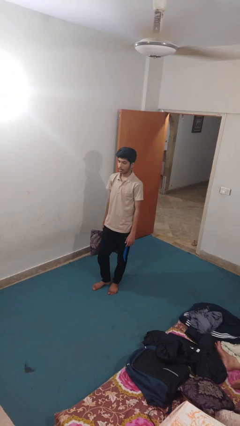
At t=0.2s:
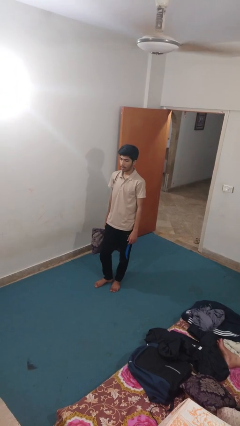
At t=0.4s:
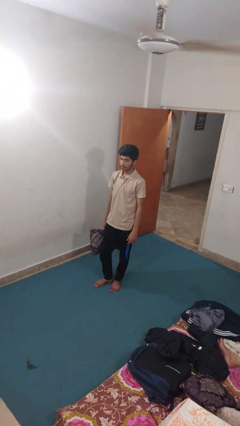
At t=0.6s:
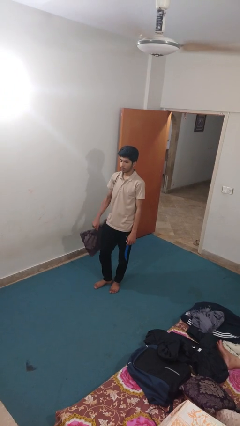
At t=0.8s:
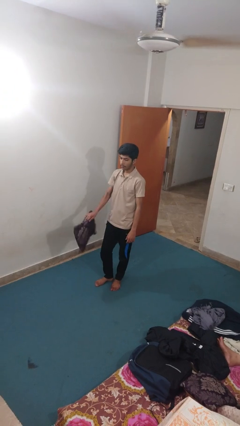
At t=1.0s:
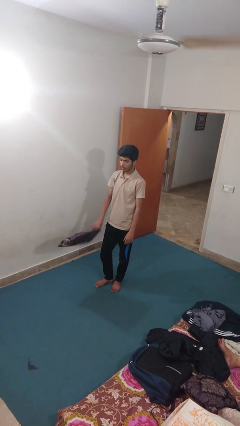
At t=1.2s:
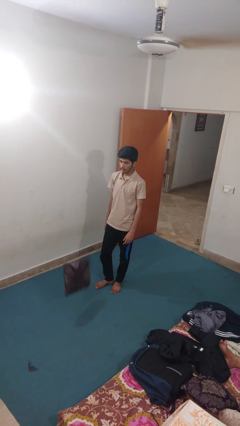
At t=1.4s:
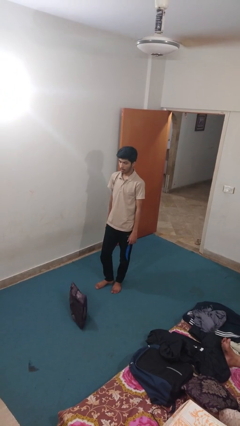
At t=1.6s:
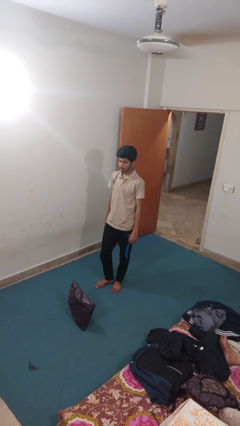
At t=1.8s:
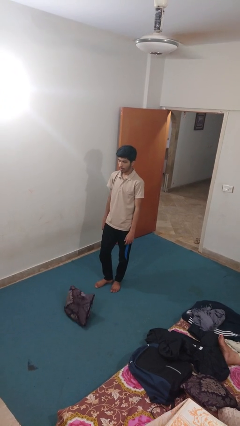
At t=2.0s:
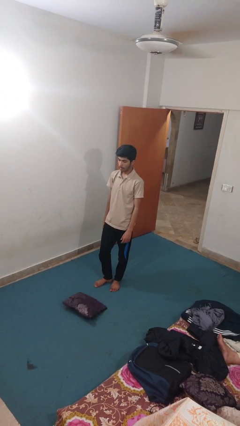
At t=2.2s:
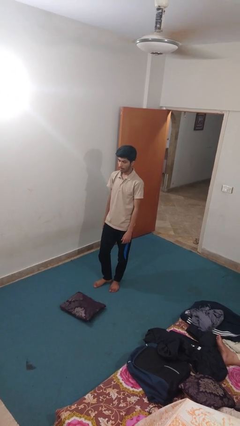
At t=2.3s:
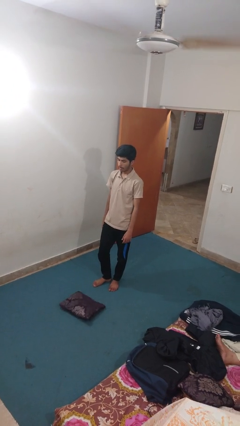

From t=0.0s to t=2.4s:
person drops object

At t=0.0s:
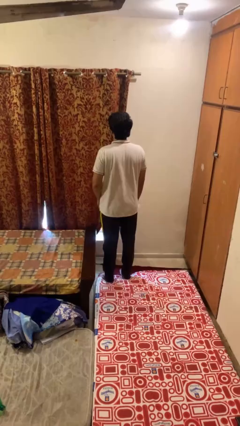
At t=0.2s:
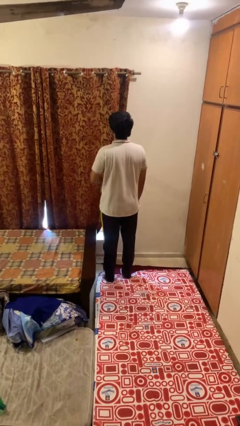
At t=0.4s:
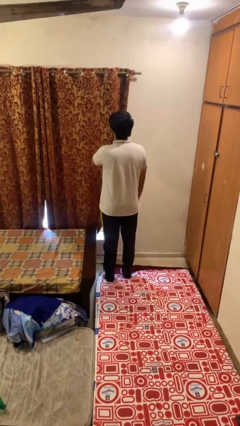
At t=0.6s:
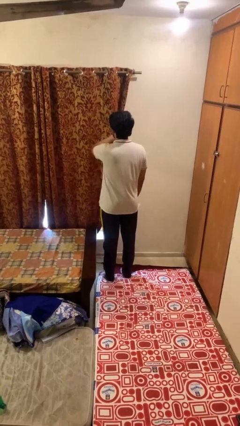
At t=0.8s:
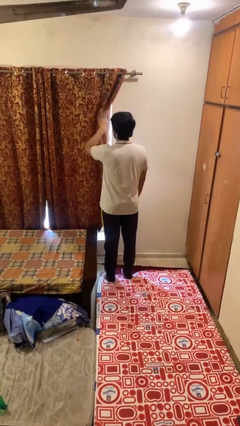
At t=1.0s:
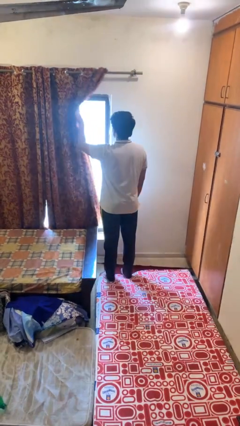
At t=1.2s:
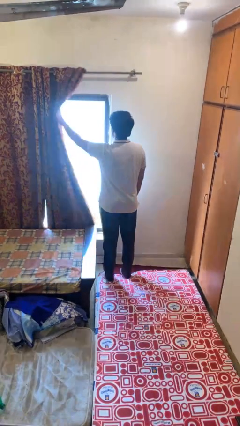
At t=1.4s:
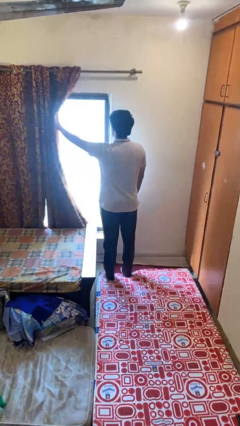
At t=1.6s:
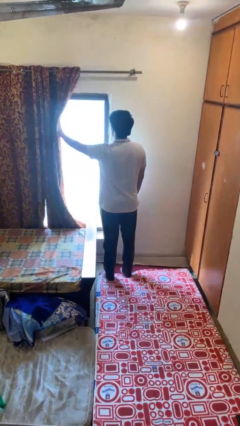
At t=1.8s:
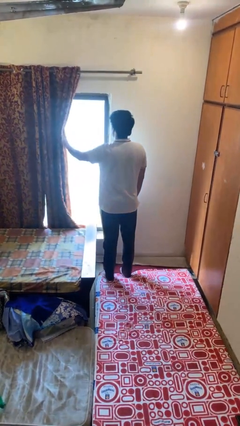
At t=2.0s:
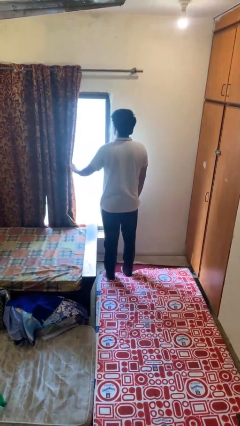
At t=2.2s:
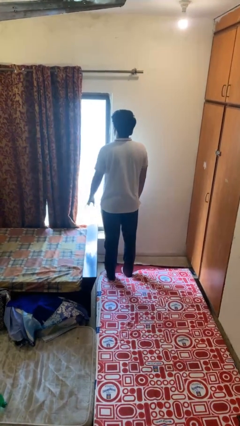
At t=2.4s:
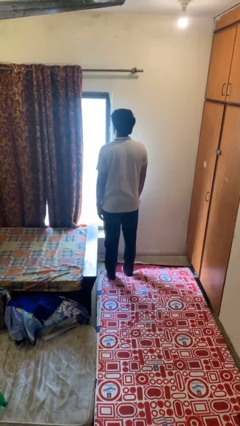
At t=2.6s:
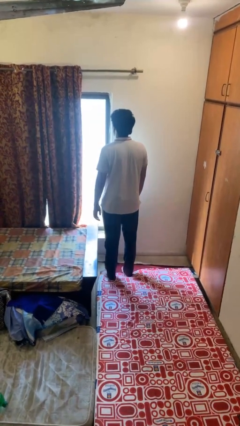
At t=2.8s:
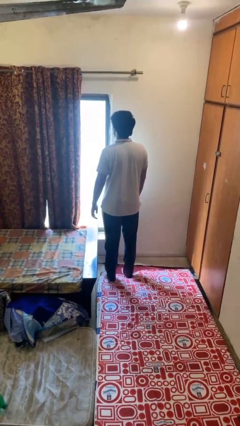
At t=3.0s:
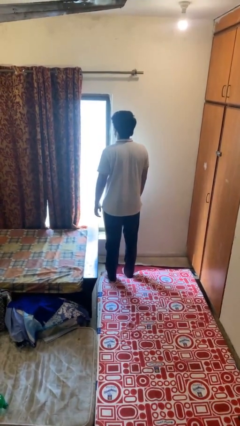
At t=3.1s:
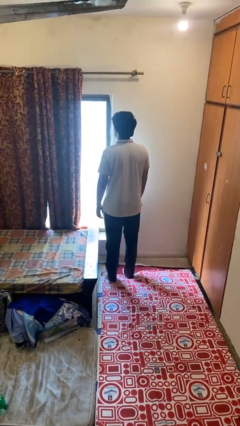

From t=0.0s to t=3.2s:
person opens curtains

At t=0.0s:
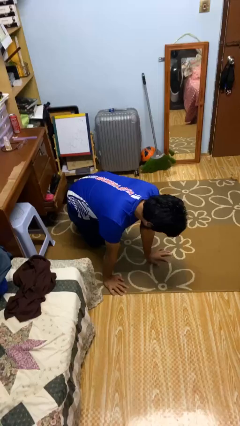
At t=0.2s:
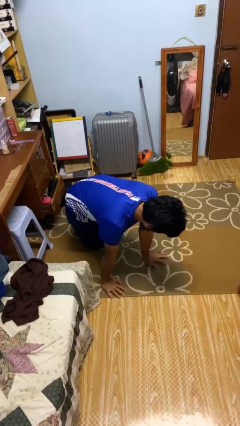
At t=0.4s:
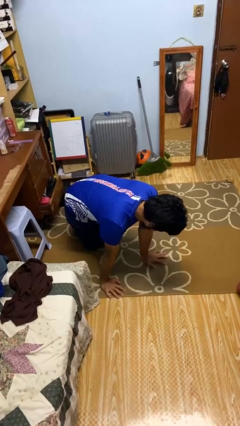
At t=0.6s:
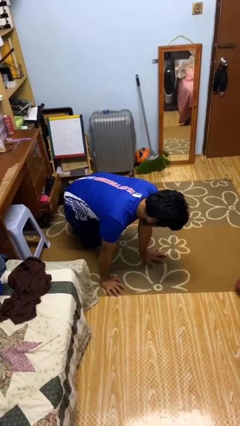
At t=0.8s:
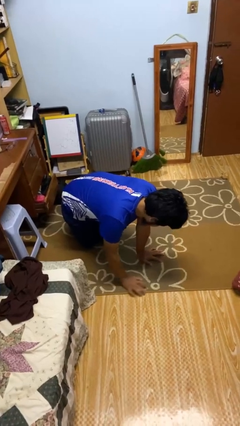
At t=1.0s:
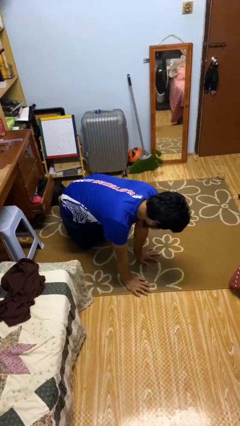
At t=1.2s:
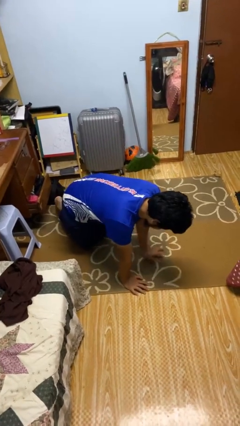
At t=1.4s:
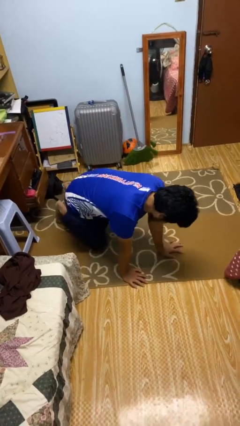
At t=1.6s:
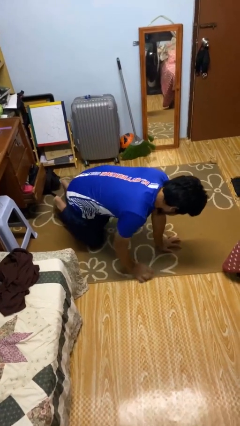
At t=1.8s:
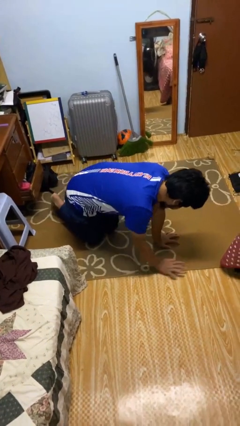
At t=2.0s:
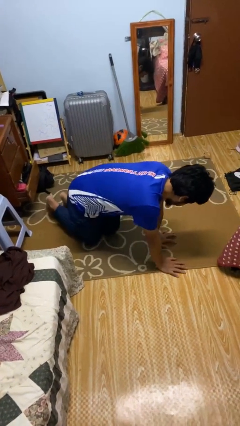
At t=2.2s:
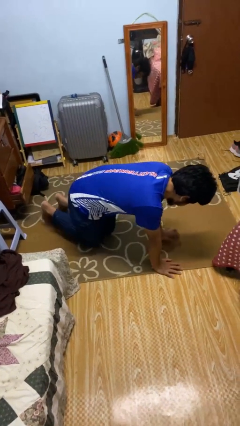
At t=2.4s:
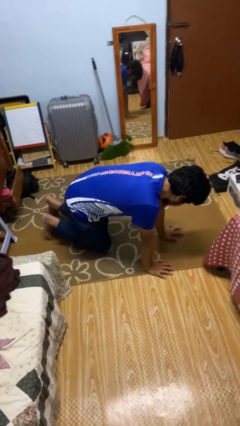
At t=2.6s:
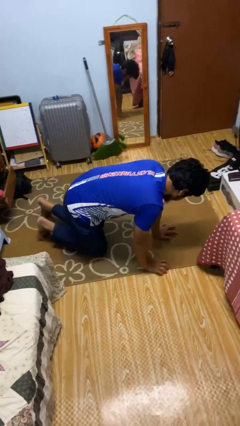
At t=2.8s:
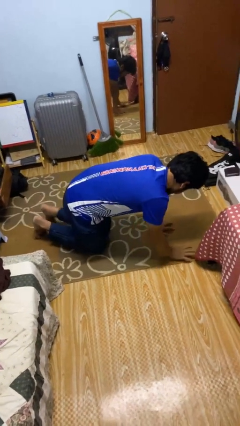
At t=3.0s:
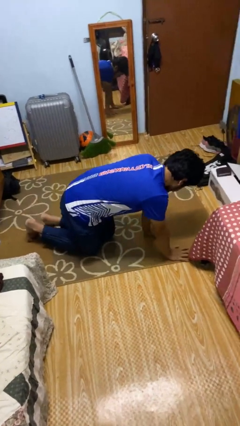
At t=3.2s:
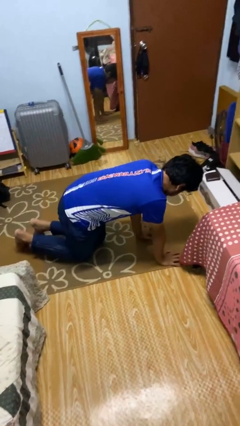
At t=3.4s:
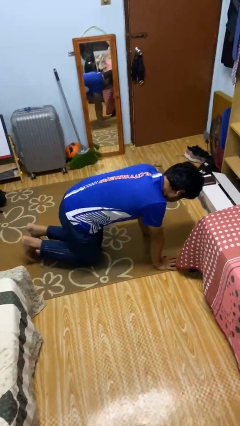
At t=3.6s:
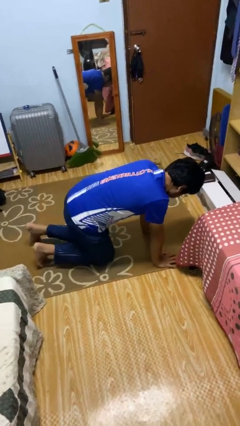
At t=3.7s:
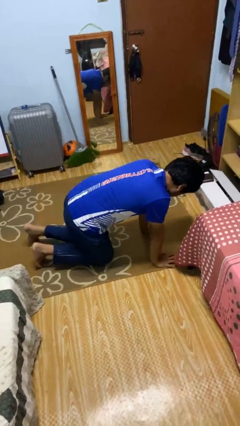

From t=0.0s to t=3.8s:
person crawls

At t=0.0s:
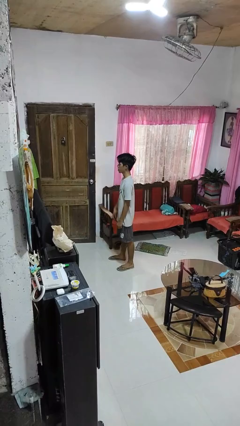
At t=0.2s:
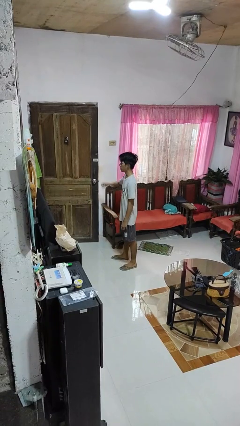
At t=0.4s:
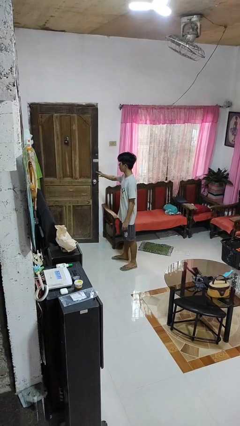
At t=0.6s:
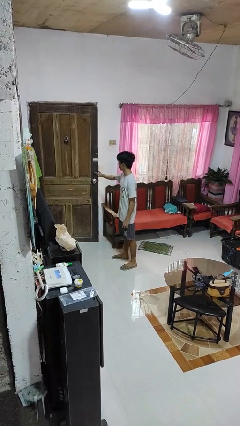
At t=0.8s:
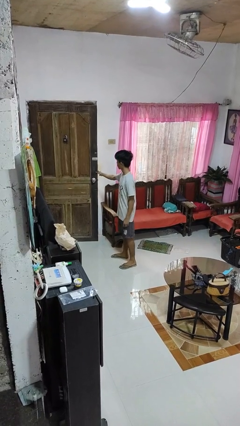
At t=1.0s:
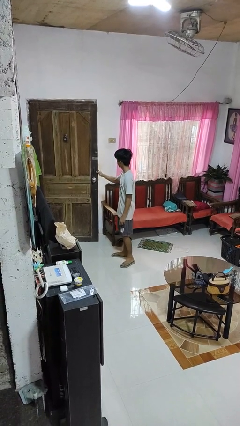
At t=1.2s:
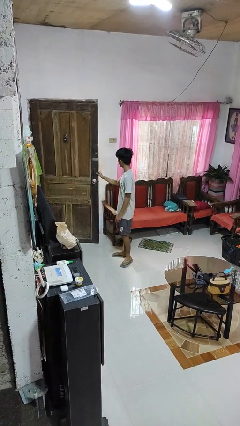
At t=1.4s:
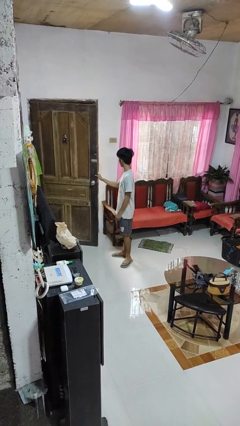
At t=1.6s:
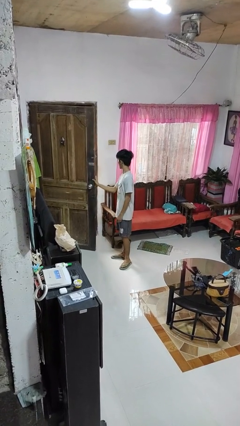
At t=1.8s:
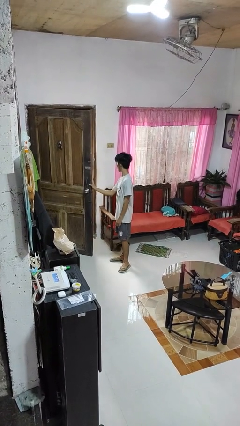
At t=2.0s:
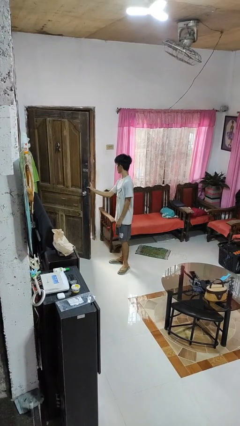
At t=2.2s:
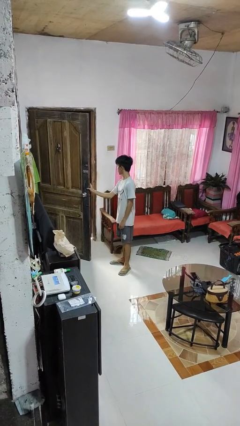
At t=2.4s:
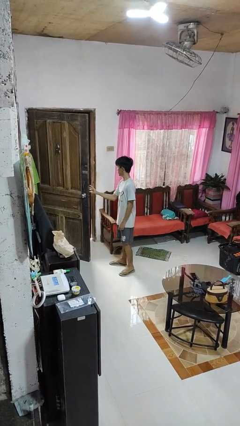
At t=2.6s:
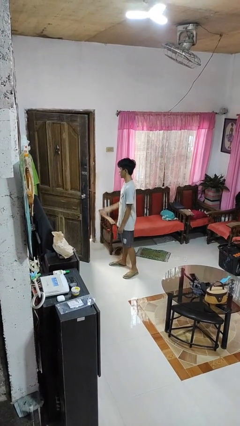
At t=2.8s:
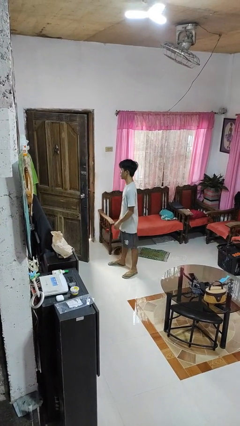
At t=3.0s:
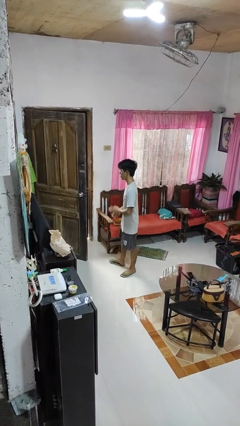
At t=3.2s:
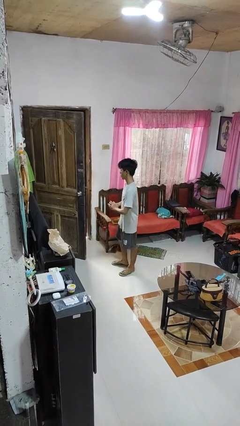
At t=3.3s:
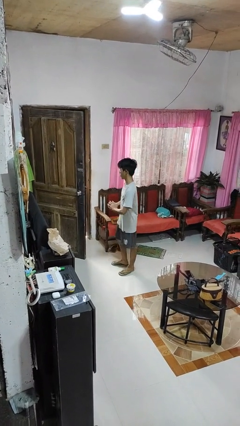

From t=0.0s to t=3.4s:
person opens facility door

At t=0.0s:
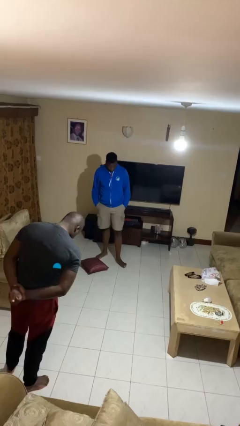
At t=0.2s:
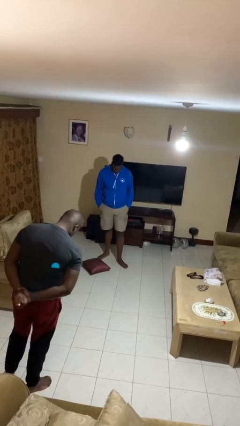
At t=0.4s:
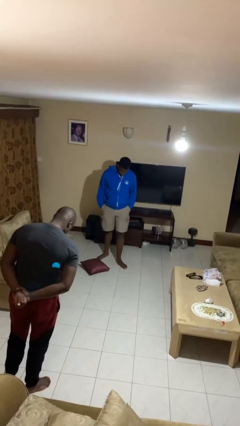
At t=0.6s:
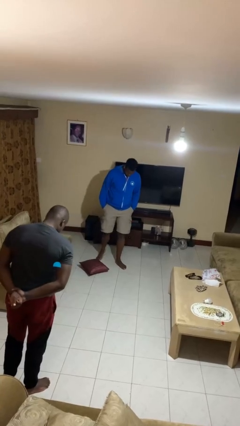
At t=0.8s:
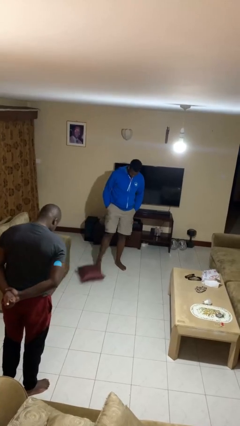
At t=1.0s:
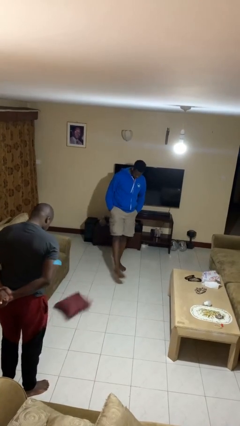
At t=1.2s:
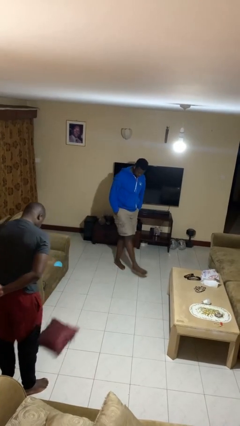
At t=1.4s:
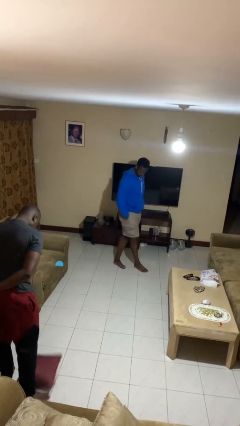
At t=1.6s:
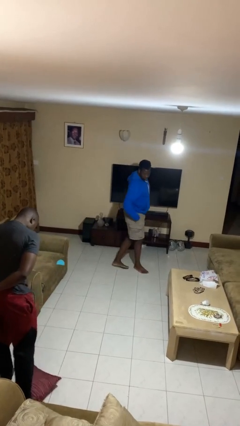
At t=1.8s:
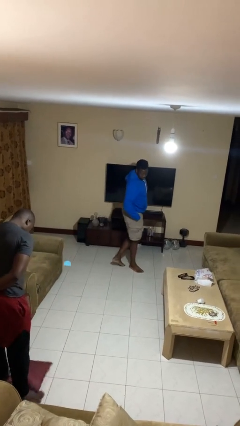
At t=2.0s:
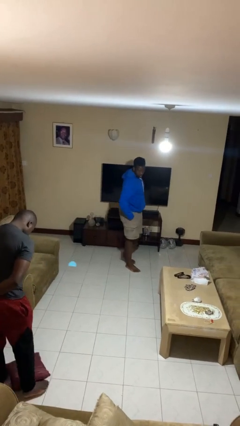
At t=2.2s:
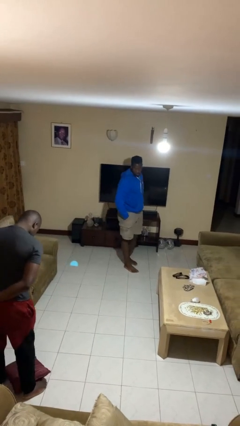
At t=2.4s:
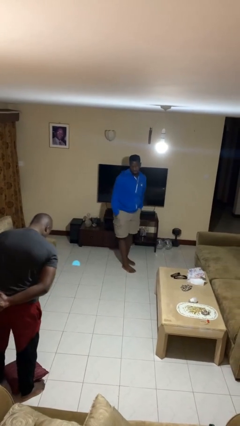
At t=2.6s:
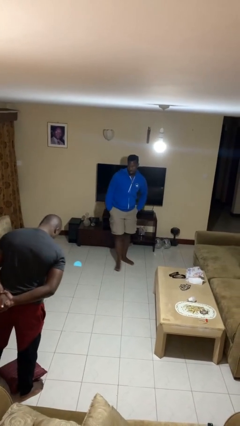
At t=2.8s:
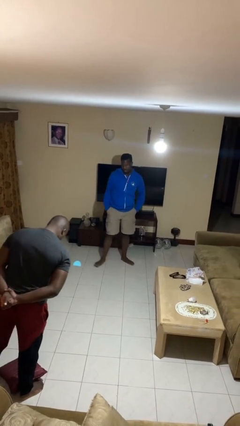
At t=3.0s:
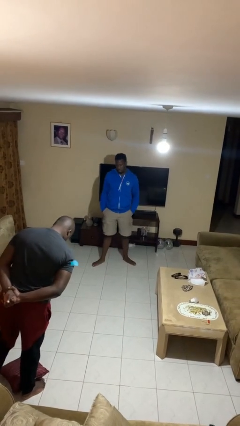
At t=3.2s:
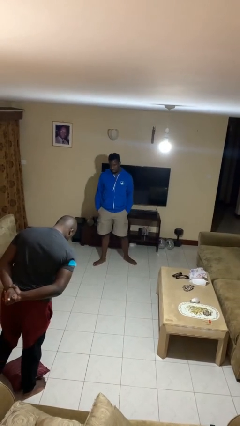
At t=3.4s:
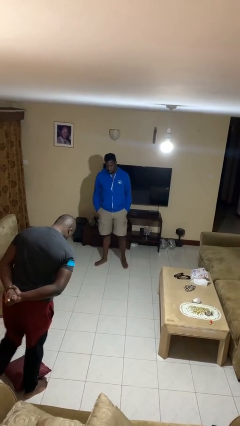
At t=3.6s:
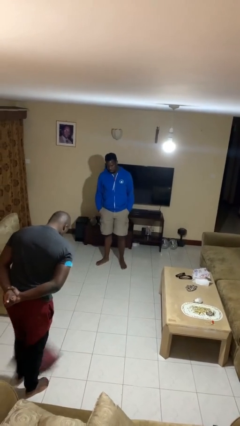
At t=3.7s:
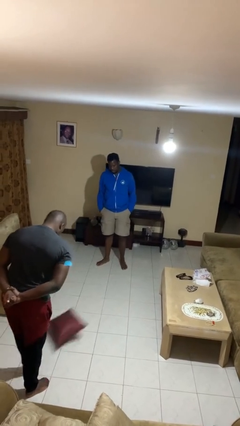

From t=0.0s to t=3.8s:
person kicks object to person

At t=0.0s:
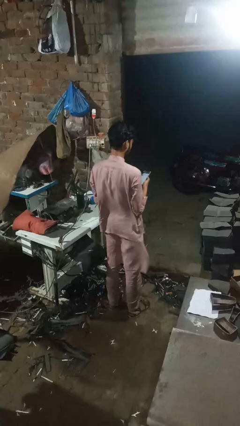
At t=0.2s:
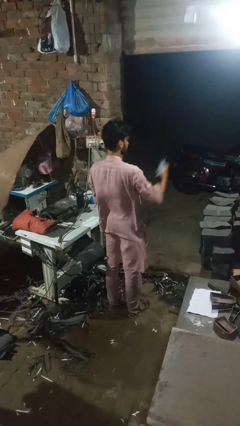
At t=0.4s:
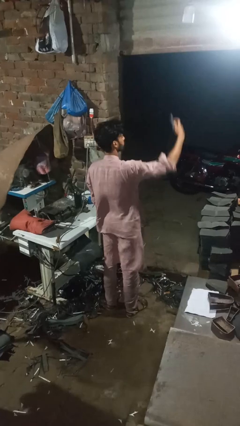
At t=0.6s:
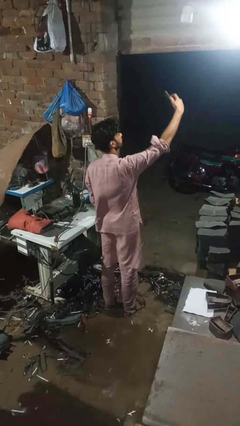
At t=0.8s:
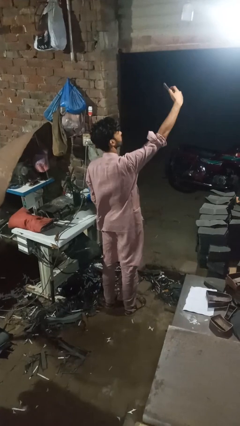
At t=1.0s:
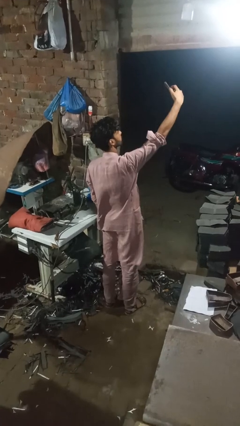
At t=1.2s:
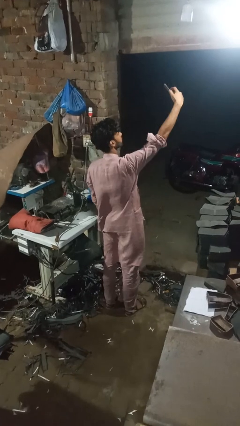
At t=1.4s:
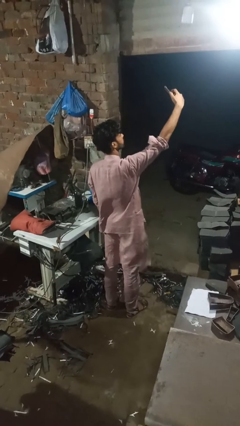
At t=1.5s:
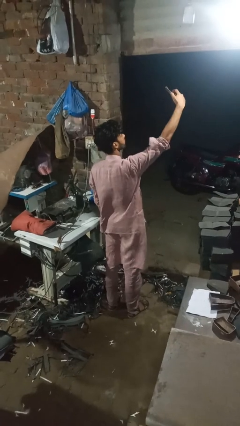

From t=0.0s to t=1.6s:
person takes selfie
